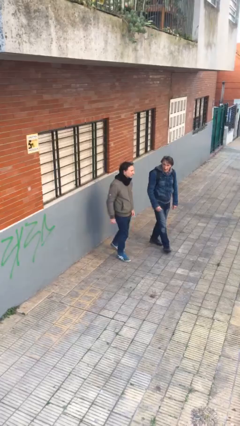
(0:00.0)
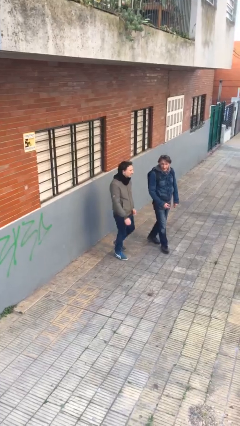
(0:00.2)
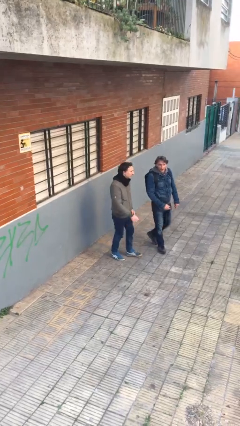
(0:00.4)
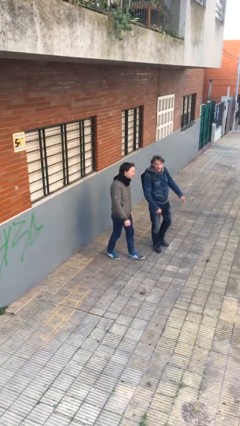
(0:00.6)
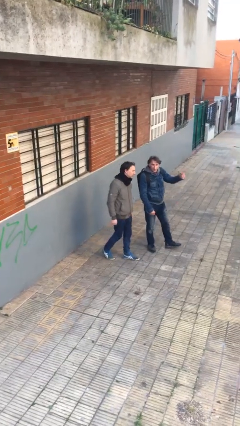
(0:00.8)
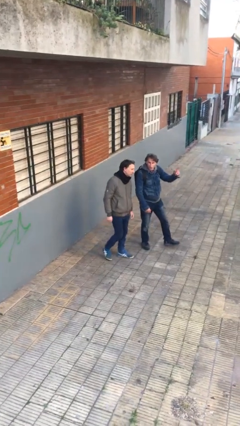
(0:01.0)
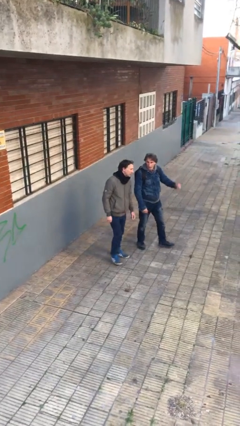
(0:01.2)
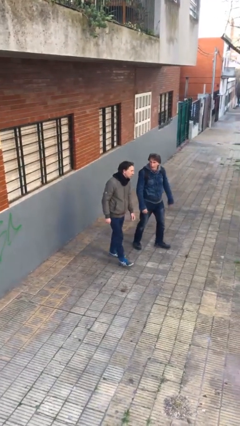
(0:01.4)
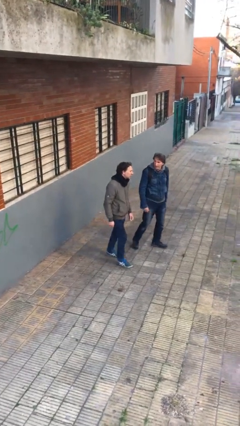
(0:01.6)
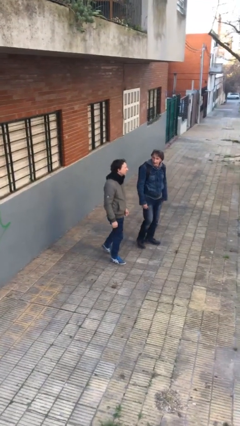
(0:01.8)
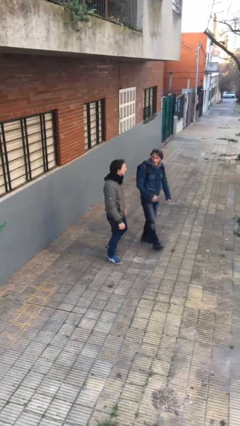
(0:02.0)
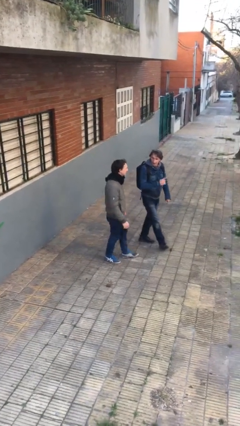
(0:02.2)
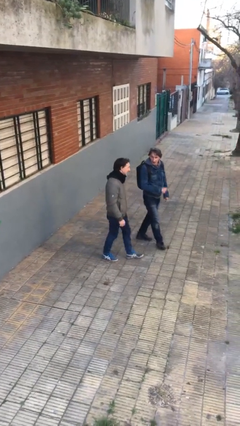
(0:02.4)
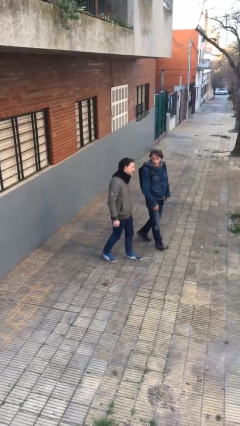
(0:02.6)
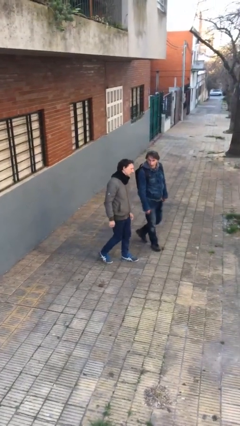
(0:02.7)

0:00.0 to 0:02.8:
person talks to person

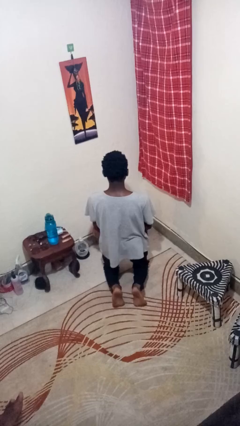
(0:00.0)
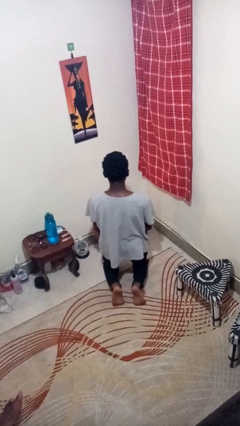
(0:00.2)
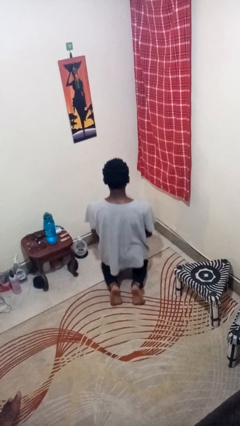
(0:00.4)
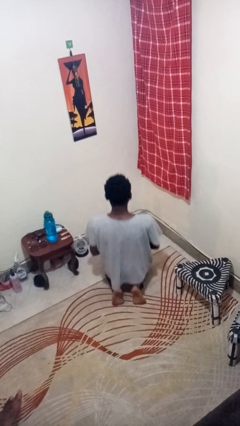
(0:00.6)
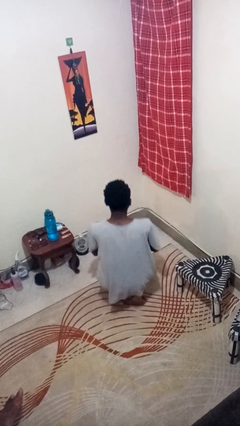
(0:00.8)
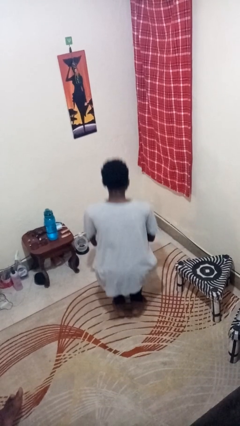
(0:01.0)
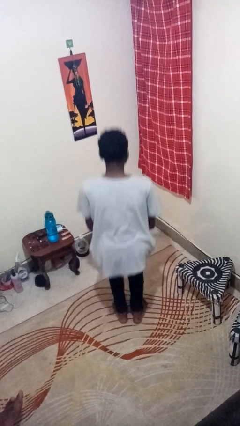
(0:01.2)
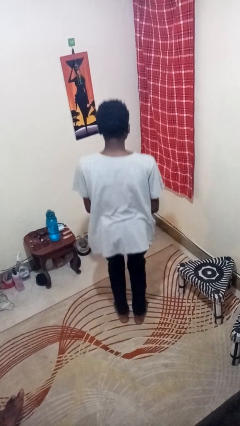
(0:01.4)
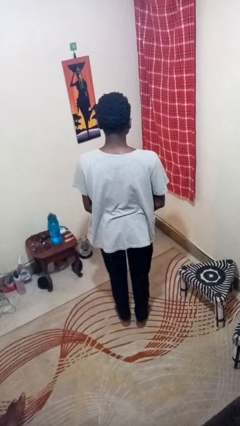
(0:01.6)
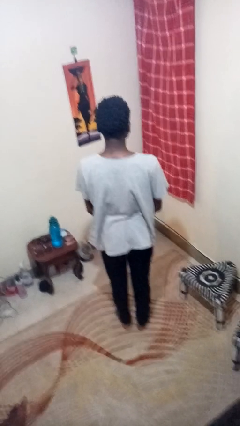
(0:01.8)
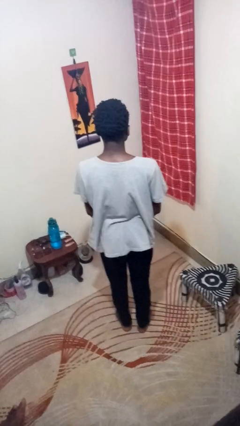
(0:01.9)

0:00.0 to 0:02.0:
person stands up from floor

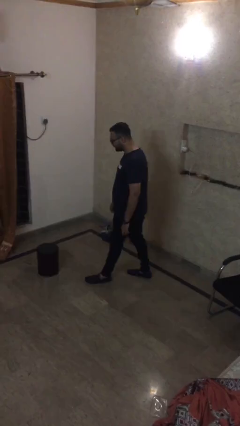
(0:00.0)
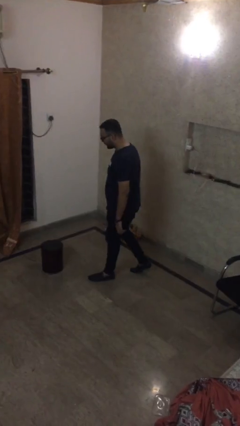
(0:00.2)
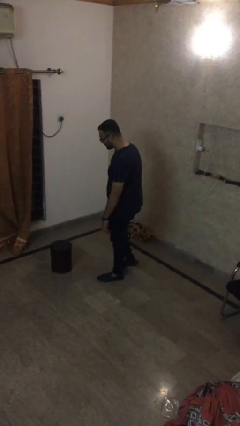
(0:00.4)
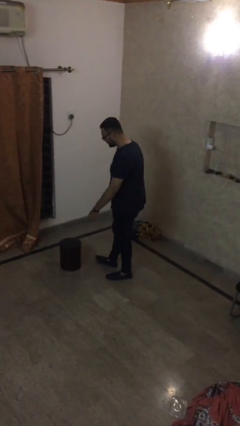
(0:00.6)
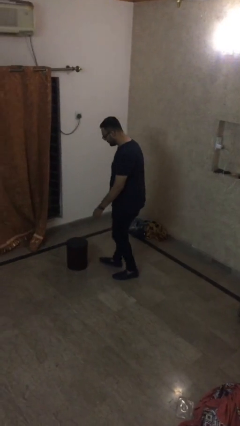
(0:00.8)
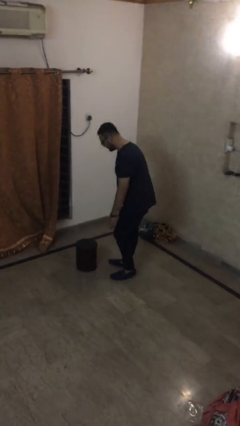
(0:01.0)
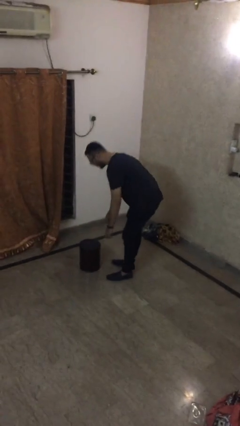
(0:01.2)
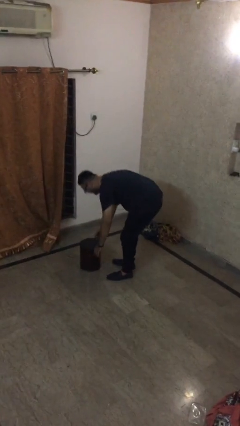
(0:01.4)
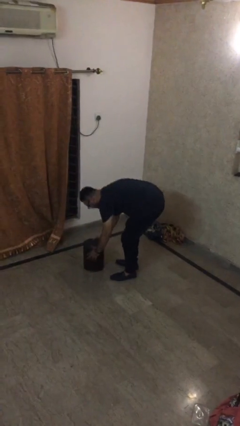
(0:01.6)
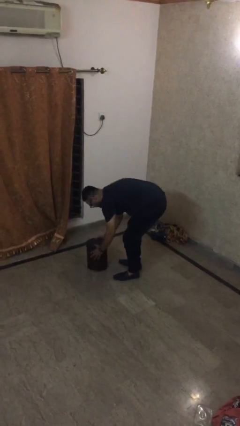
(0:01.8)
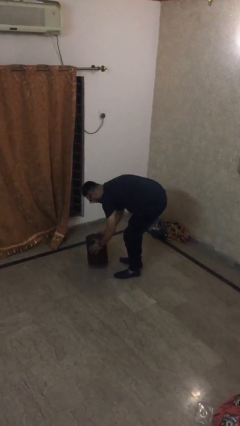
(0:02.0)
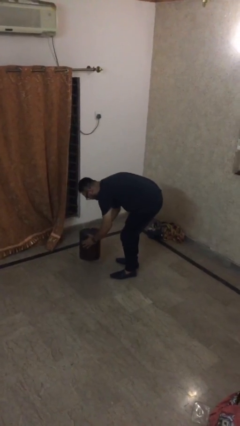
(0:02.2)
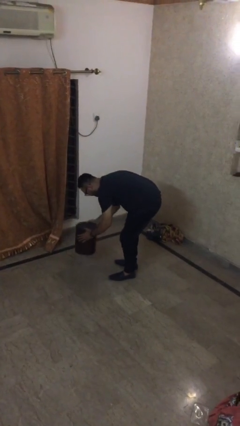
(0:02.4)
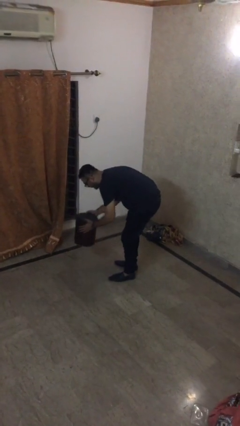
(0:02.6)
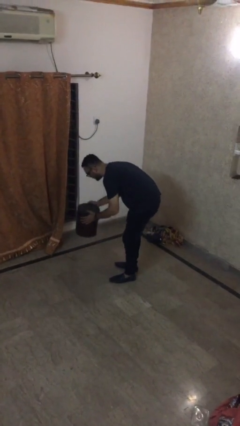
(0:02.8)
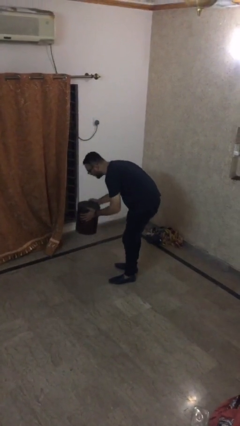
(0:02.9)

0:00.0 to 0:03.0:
person picks up object from floor

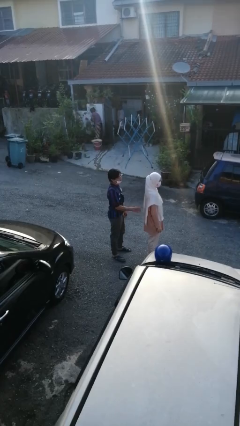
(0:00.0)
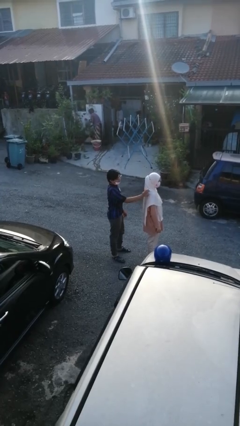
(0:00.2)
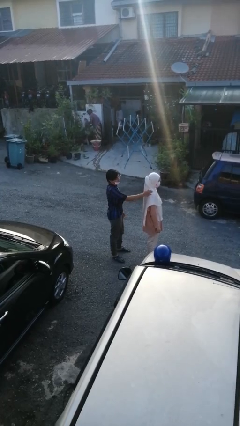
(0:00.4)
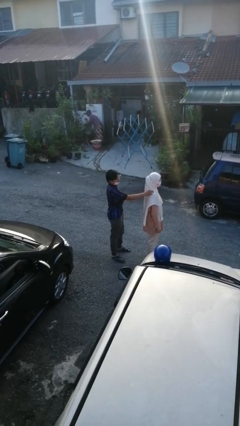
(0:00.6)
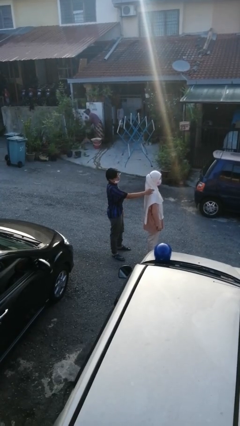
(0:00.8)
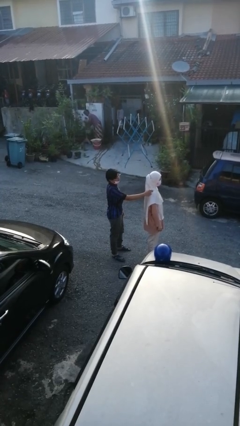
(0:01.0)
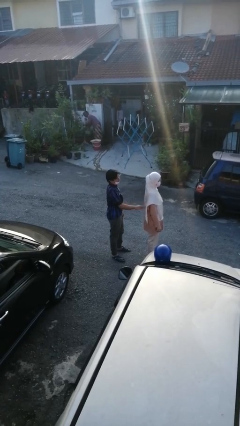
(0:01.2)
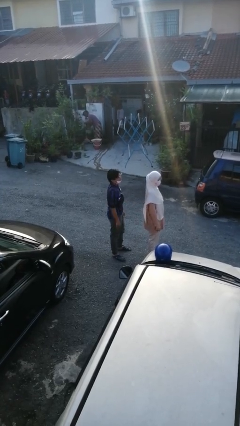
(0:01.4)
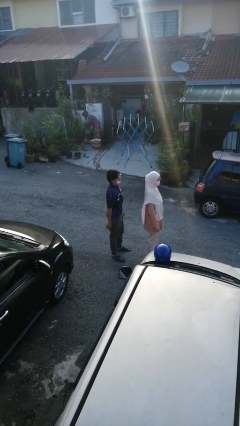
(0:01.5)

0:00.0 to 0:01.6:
person touches back of person

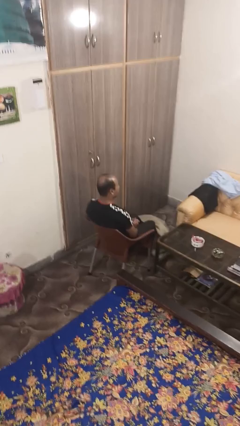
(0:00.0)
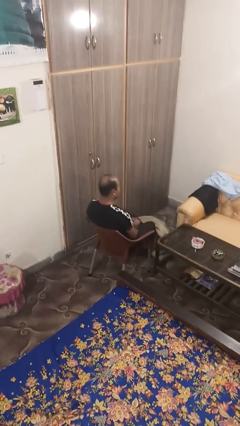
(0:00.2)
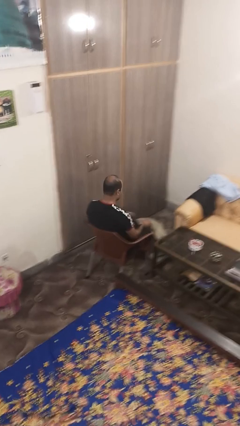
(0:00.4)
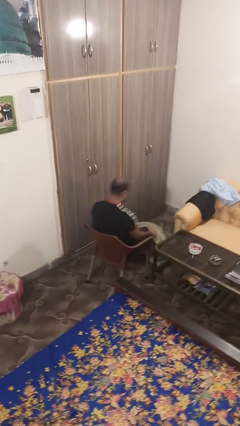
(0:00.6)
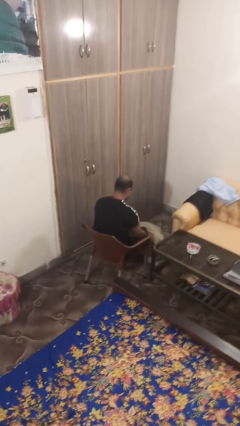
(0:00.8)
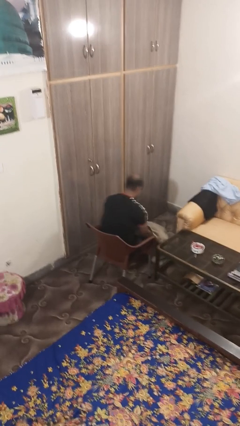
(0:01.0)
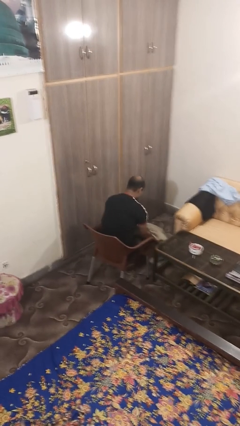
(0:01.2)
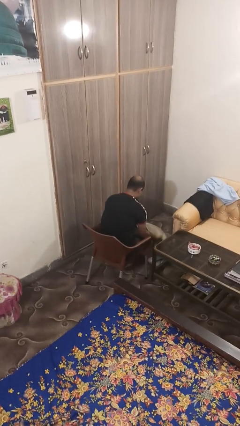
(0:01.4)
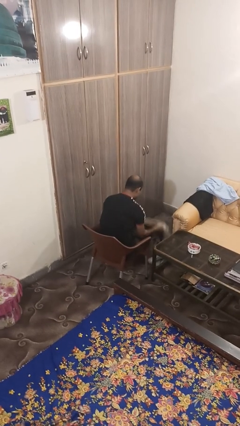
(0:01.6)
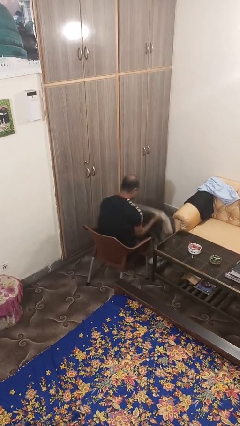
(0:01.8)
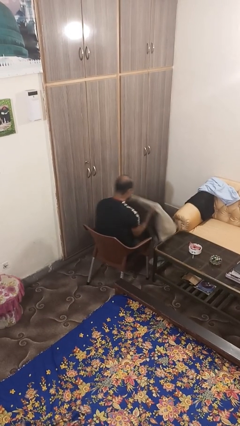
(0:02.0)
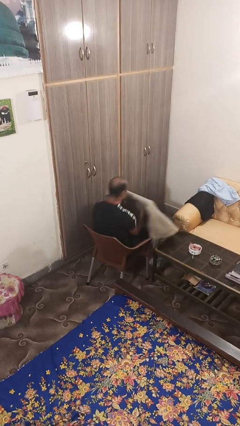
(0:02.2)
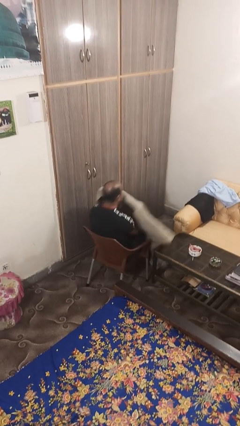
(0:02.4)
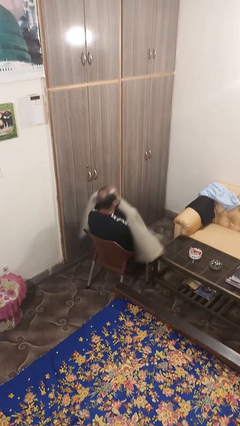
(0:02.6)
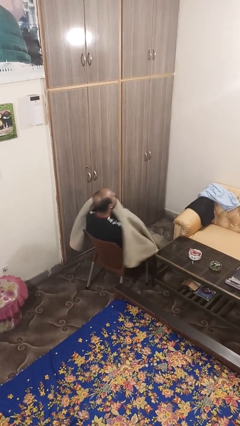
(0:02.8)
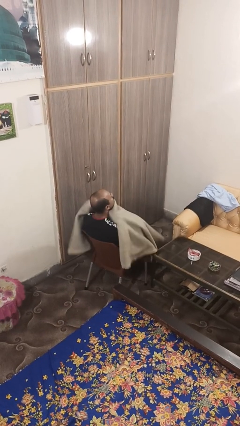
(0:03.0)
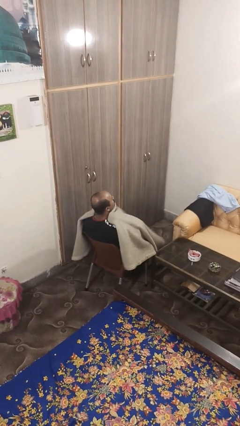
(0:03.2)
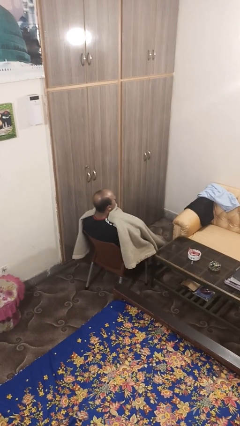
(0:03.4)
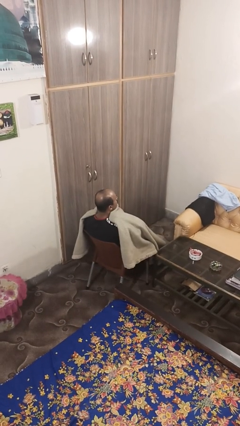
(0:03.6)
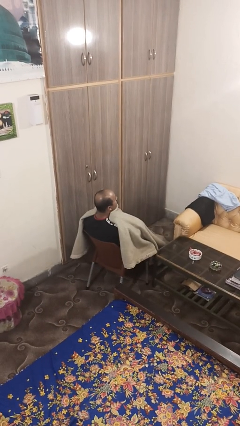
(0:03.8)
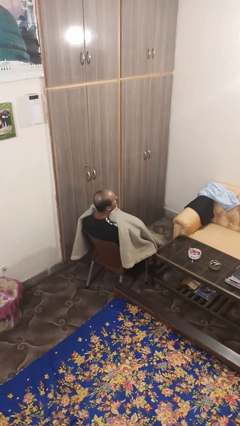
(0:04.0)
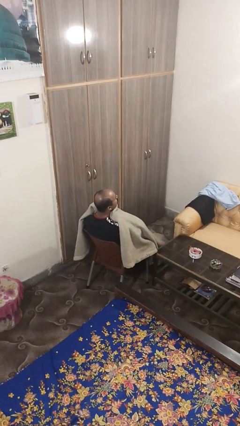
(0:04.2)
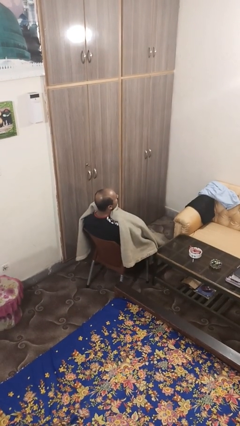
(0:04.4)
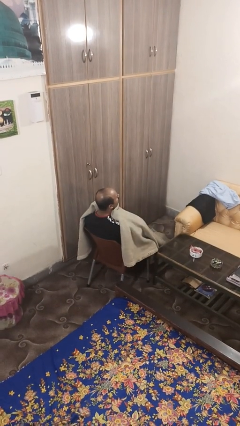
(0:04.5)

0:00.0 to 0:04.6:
person covers with blanket

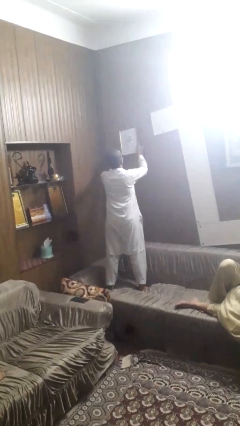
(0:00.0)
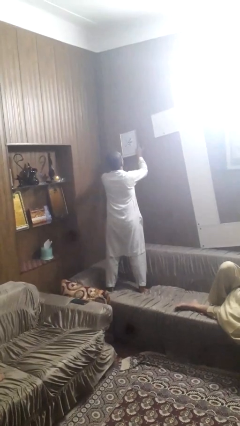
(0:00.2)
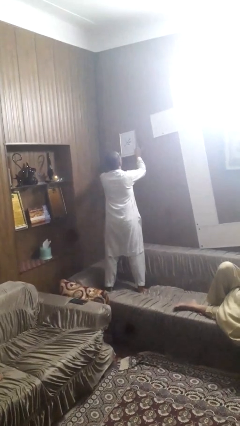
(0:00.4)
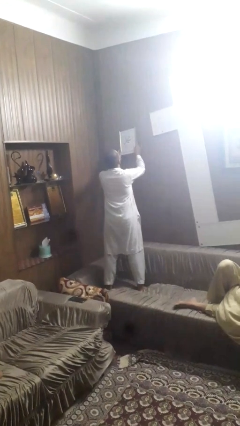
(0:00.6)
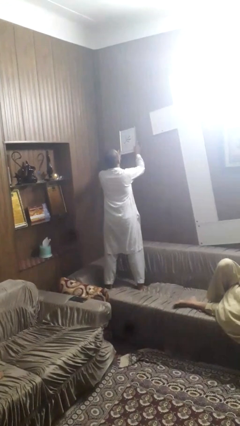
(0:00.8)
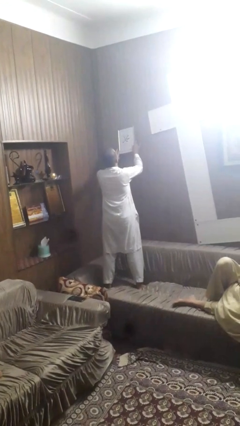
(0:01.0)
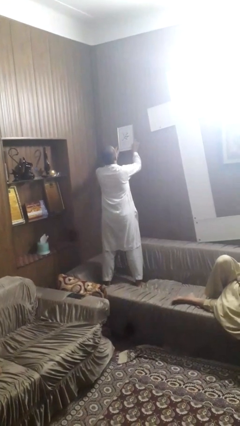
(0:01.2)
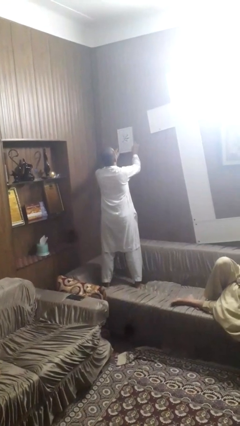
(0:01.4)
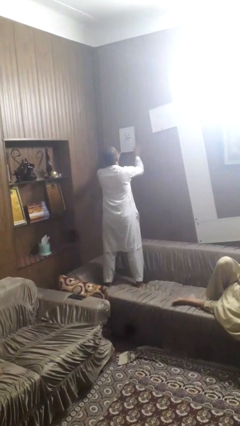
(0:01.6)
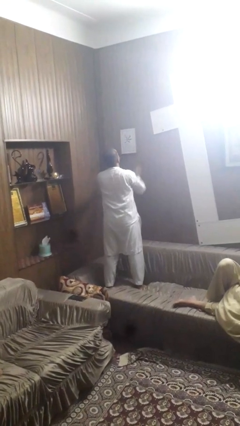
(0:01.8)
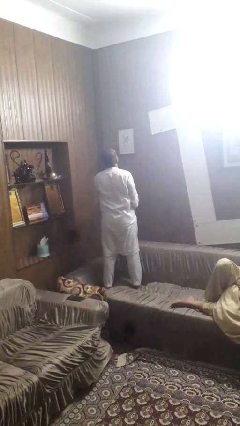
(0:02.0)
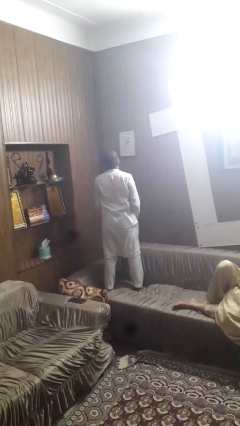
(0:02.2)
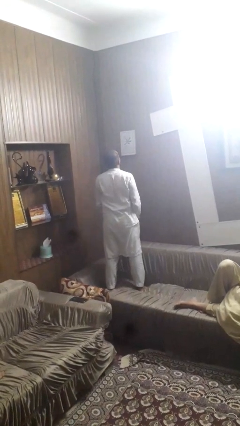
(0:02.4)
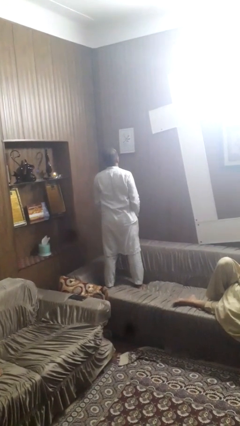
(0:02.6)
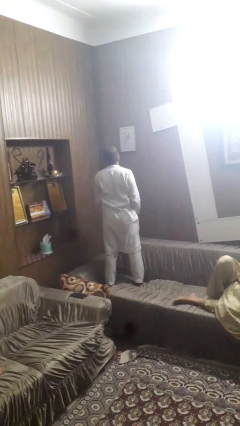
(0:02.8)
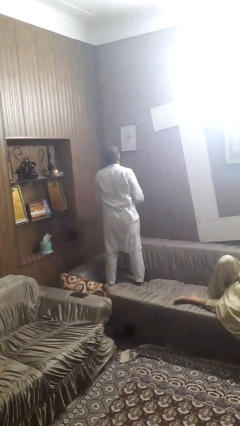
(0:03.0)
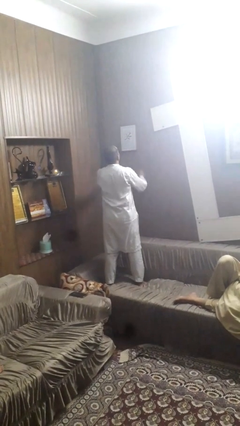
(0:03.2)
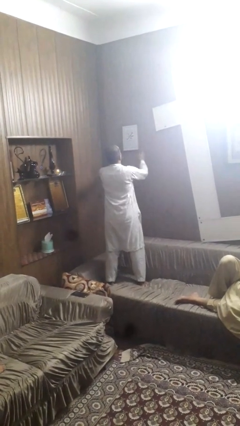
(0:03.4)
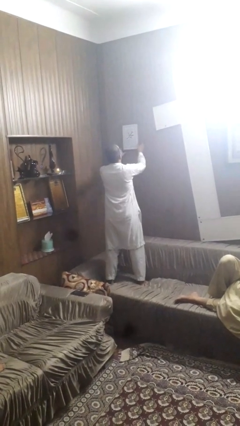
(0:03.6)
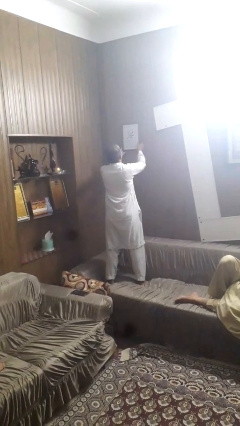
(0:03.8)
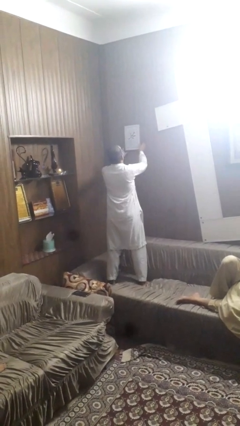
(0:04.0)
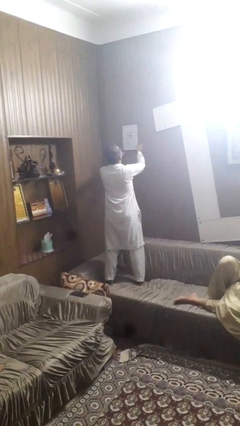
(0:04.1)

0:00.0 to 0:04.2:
person puts up picture frame
